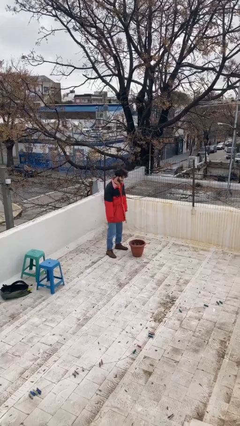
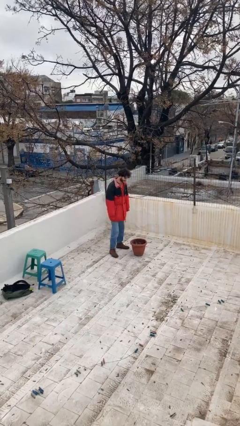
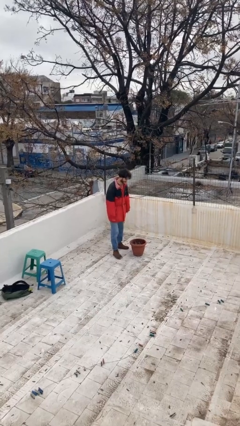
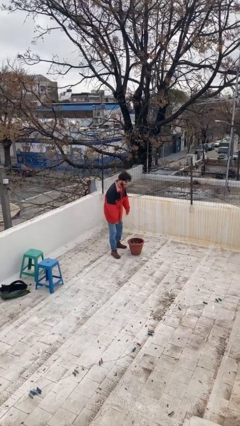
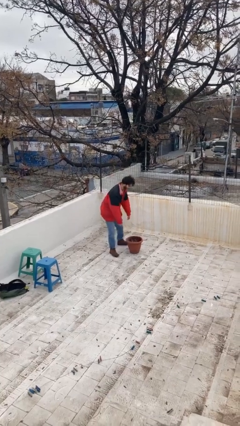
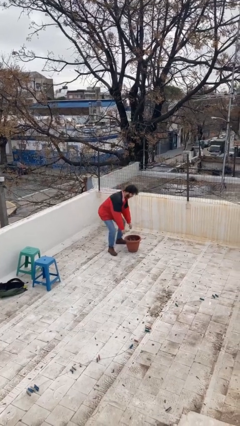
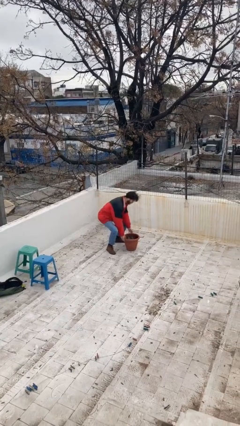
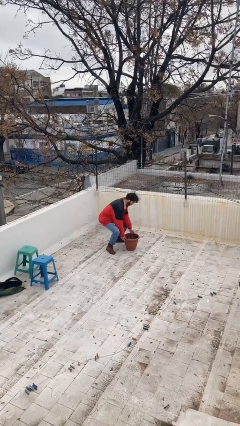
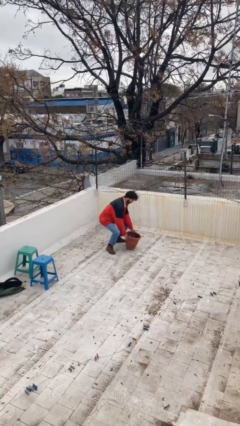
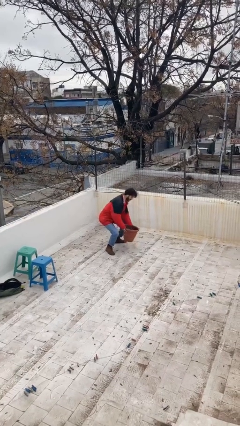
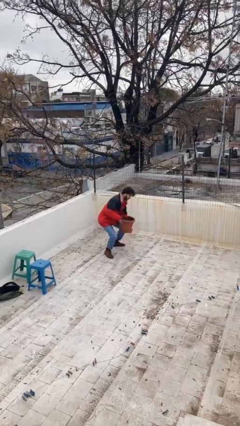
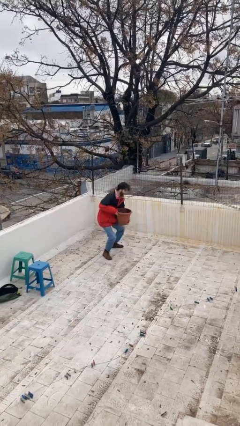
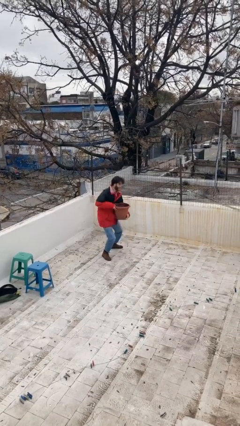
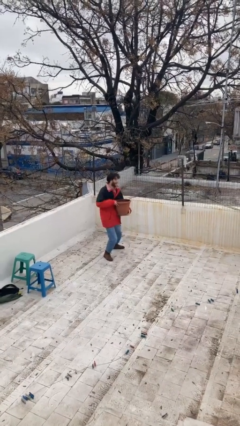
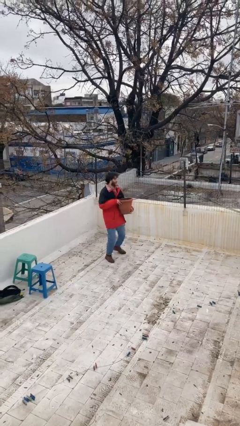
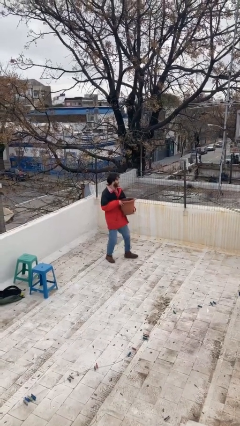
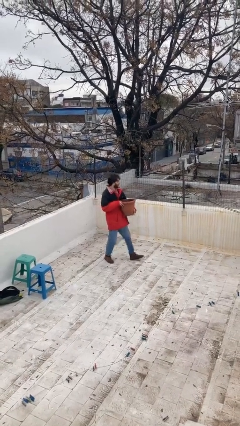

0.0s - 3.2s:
person picks up object from floor

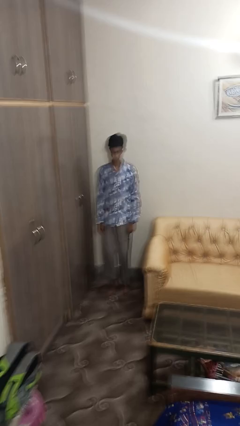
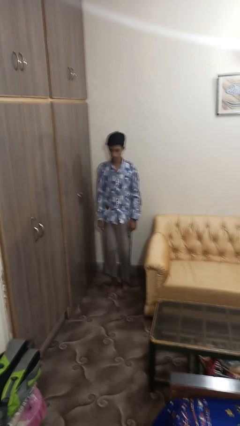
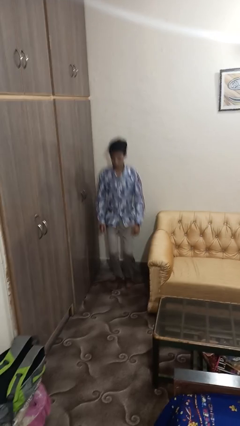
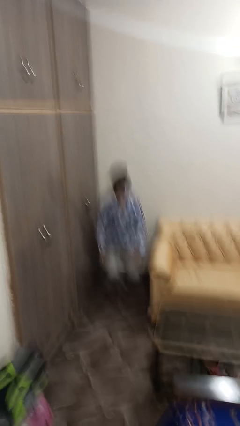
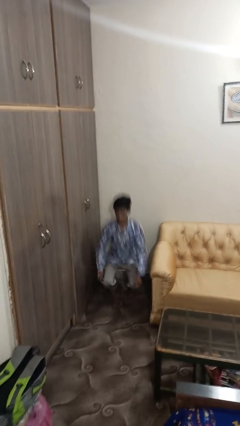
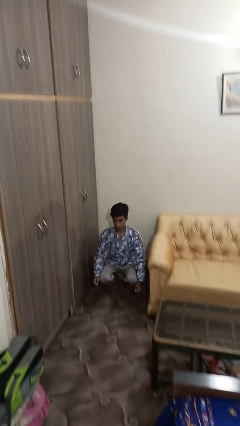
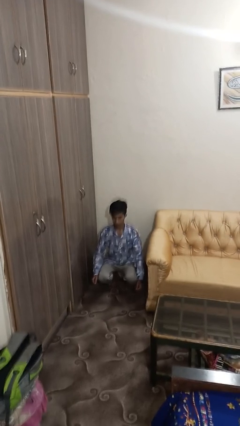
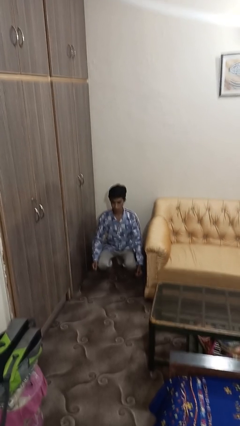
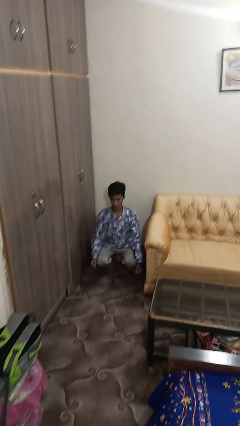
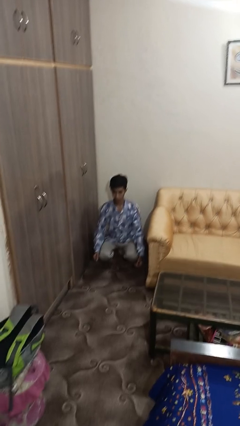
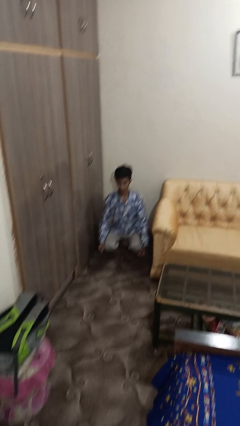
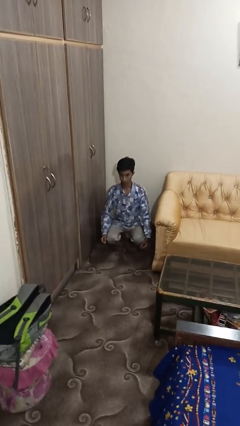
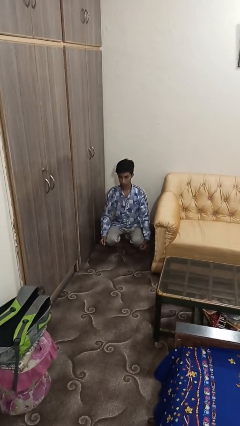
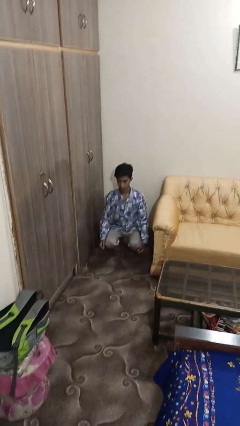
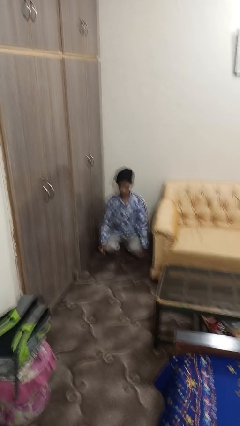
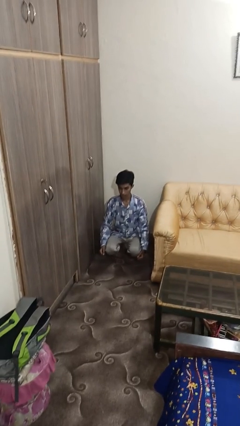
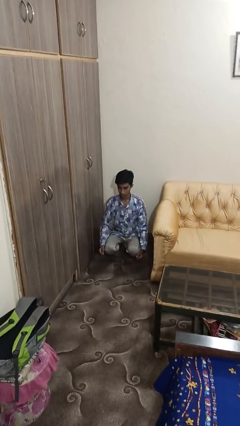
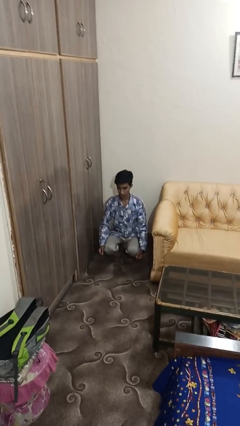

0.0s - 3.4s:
person squats

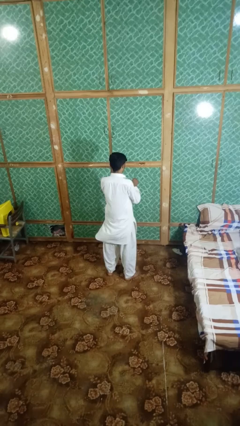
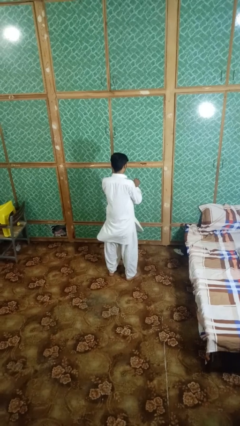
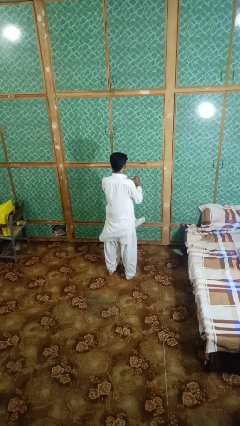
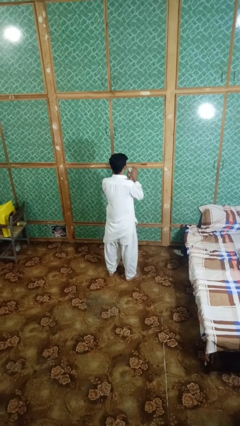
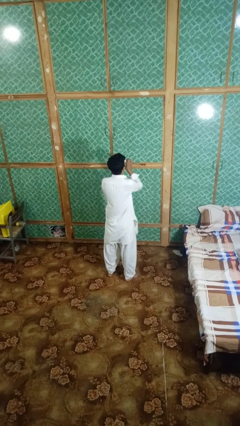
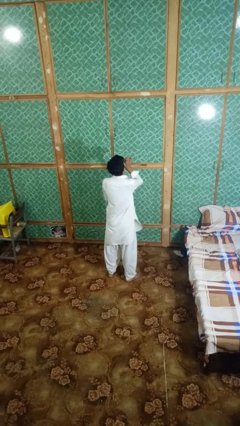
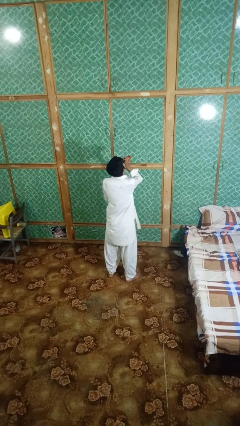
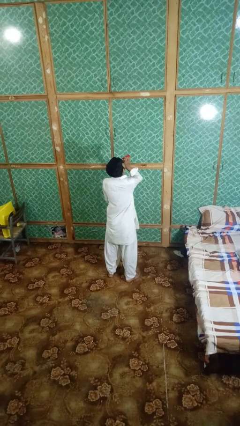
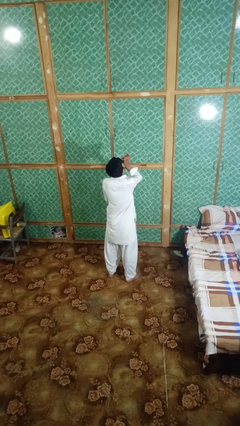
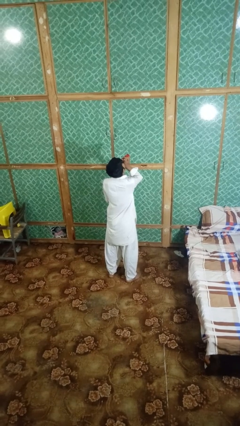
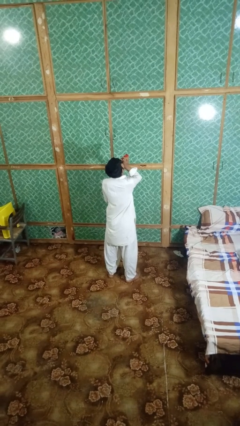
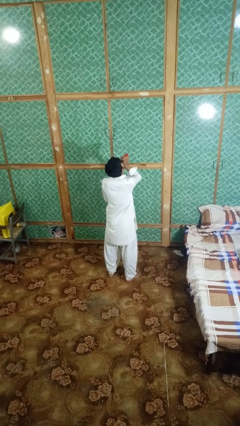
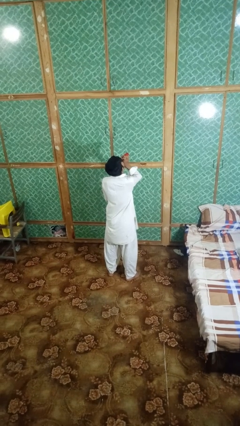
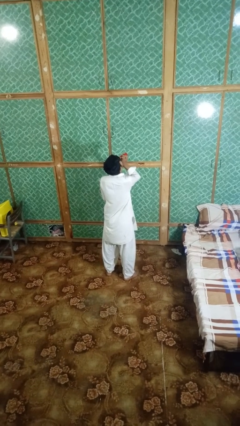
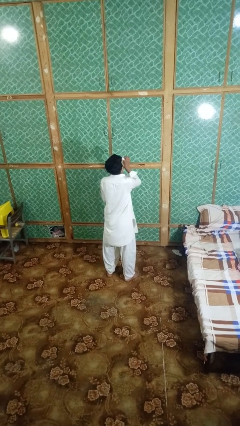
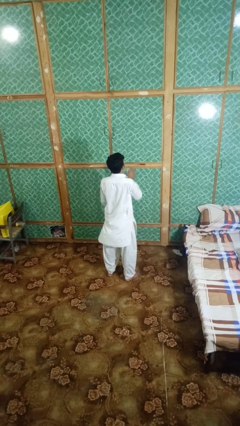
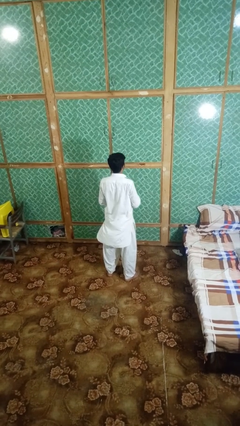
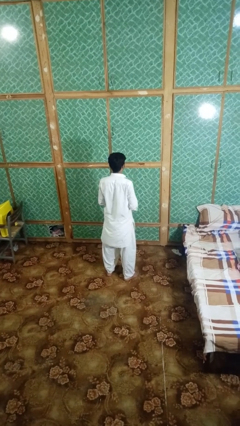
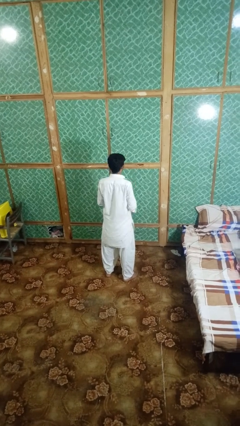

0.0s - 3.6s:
person drinks from beverage can

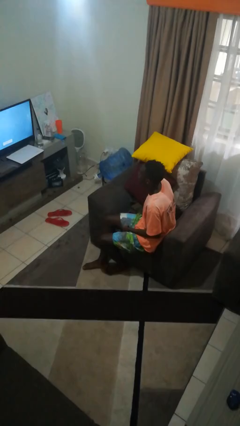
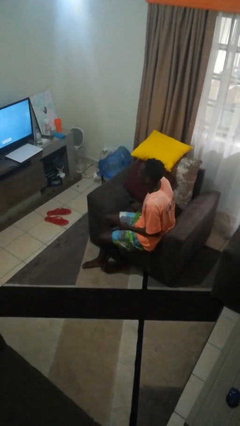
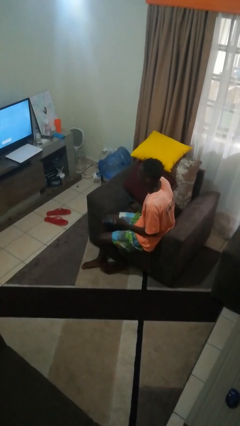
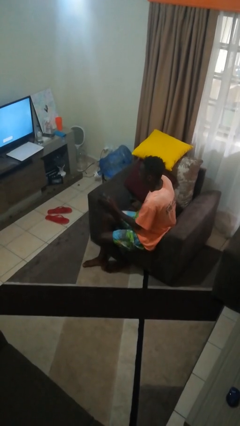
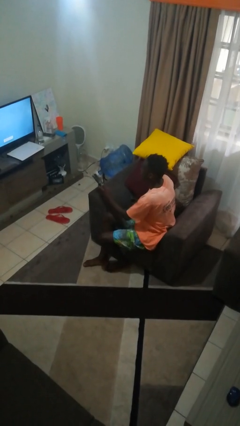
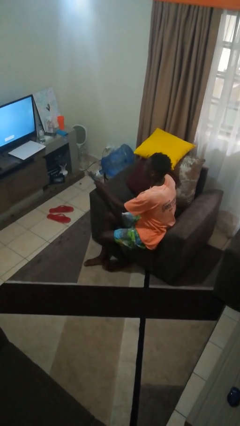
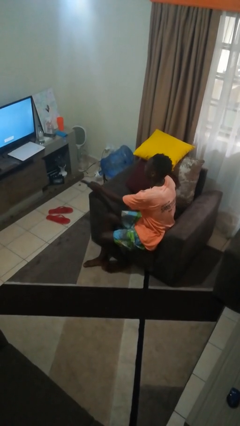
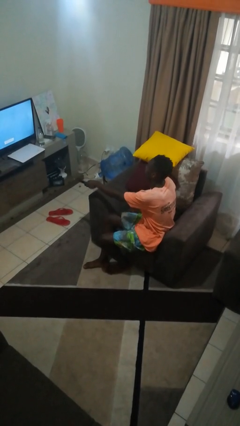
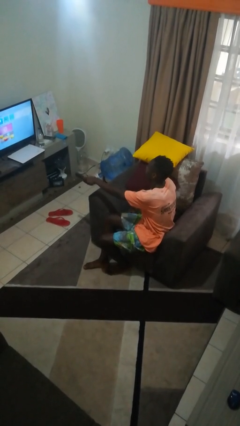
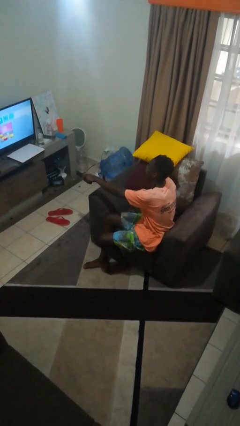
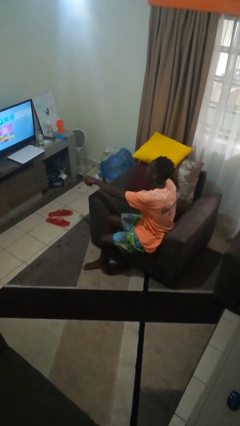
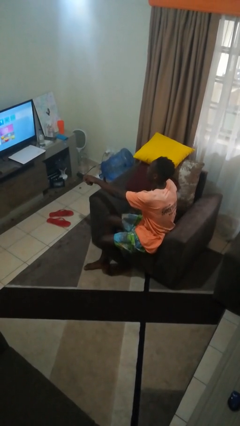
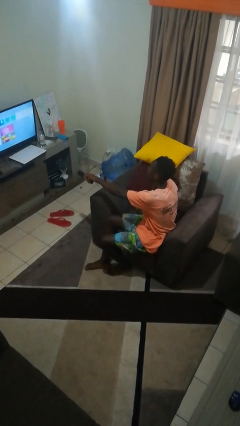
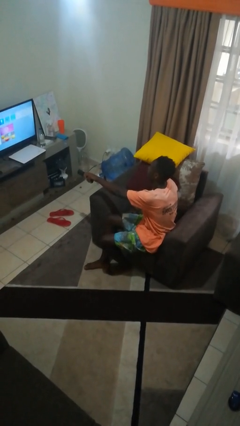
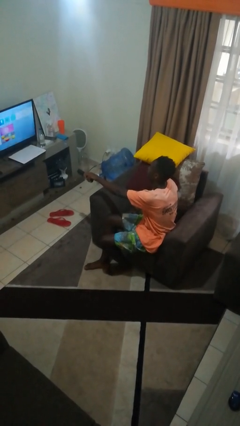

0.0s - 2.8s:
person uses television remote

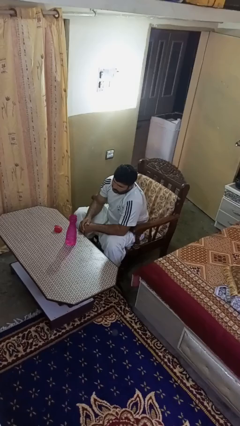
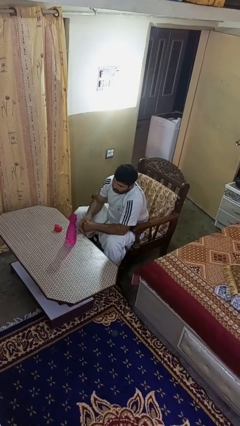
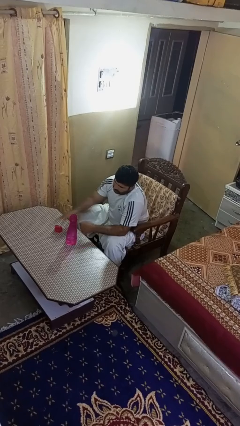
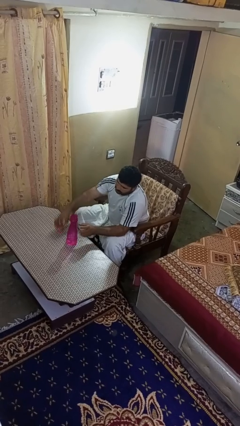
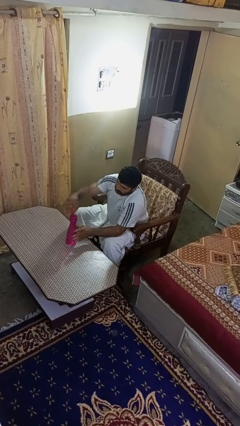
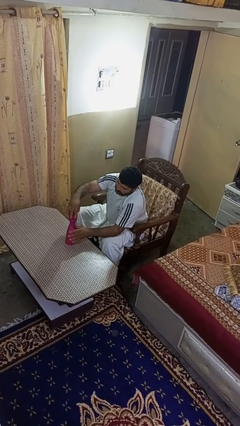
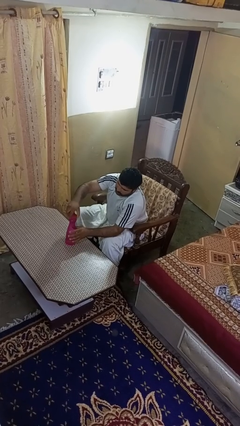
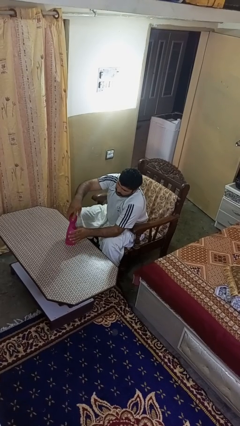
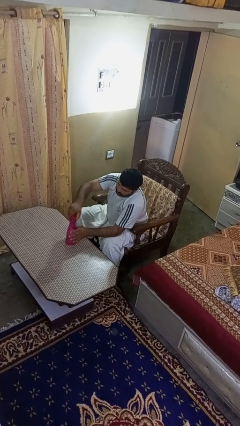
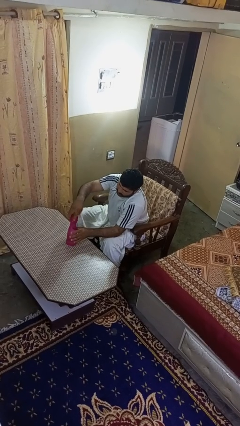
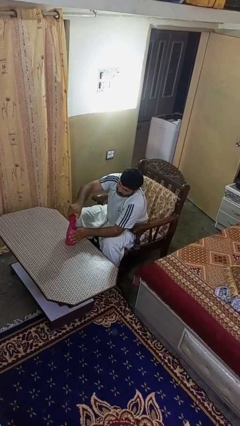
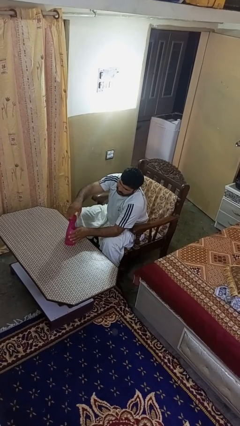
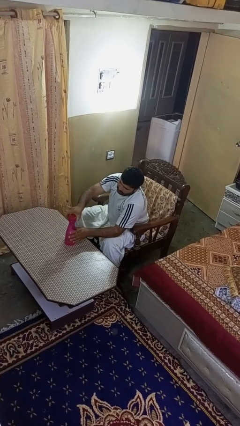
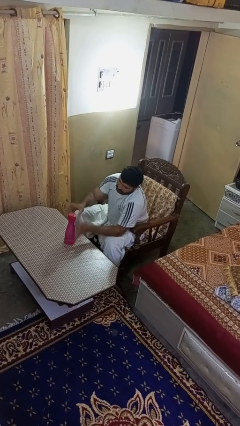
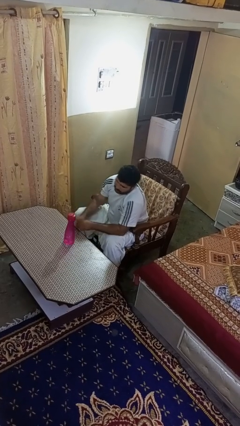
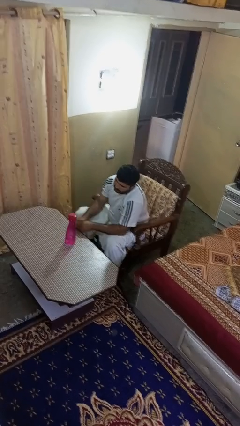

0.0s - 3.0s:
person screws lid to bottle

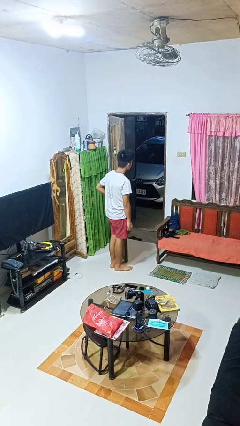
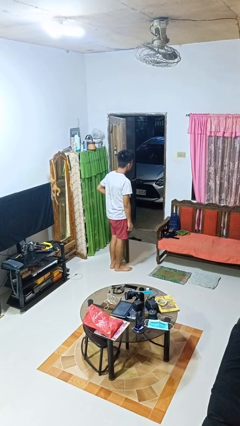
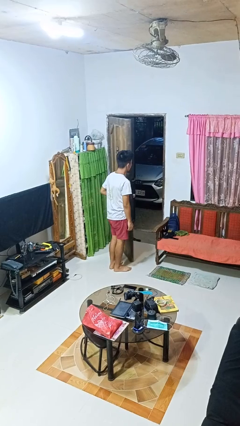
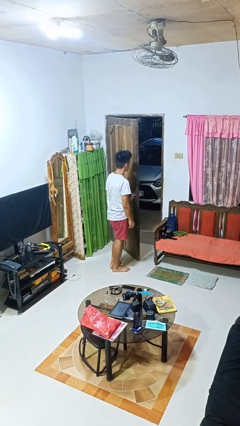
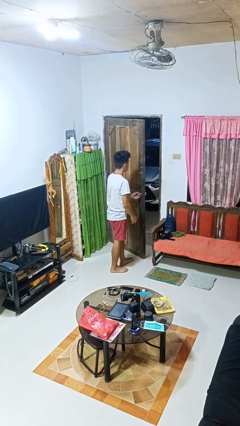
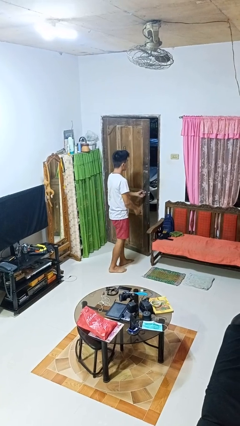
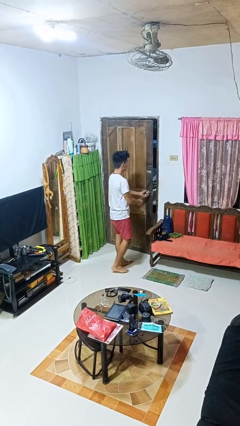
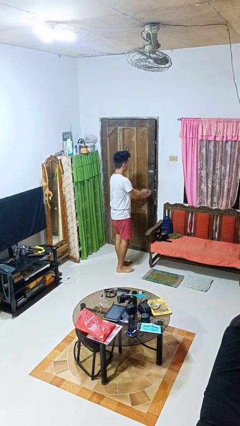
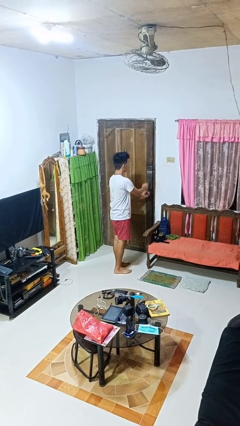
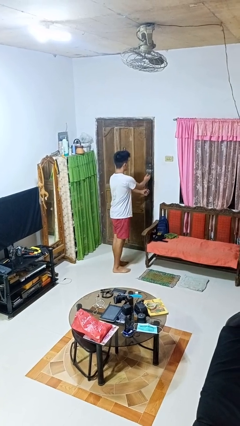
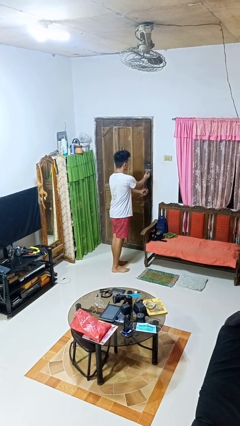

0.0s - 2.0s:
person closes facility door
